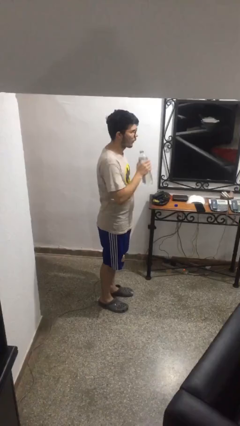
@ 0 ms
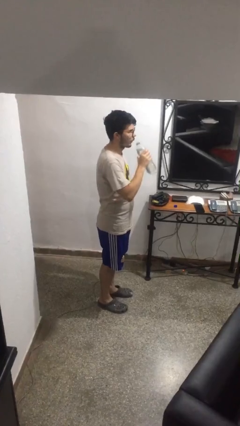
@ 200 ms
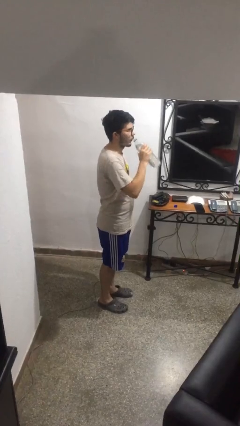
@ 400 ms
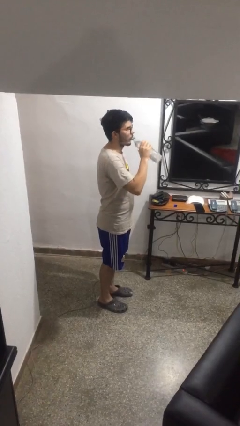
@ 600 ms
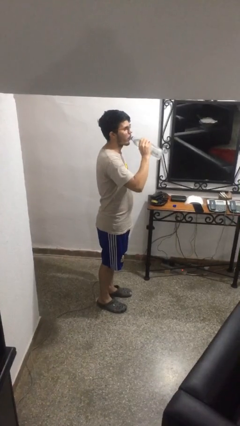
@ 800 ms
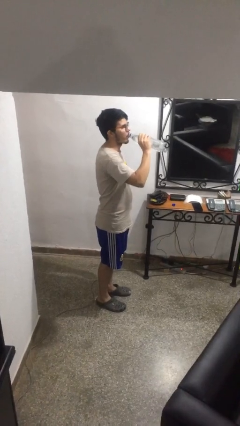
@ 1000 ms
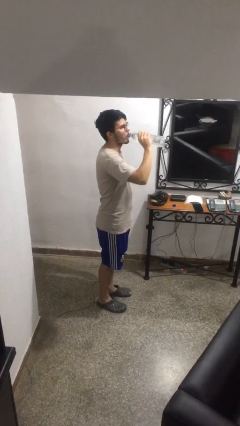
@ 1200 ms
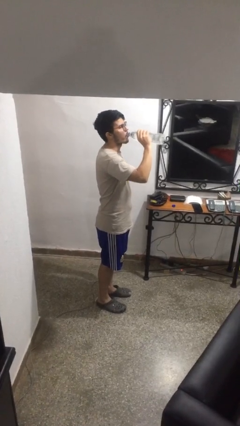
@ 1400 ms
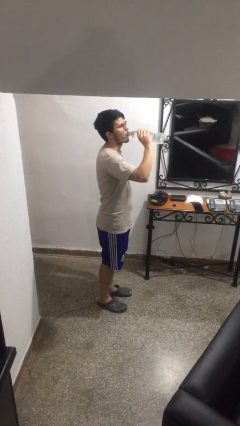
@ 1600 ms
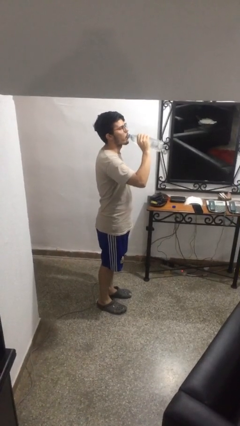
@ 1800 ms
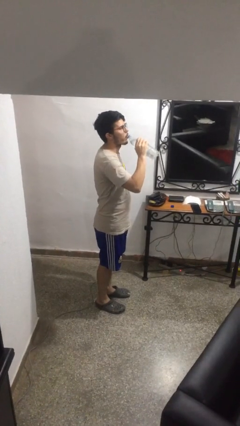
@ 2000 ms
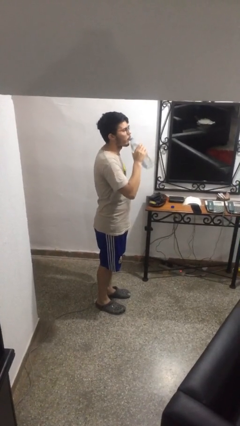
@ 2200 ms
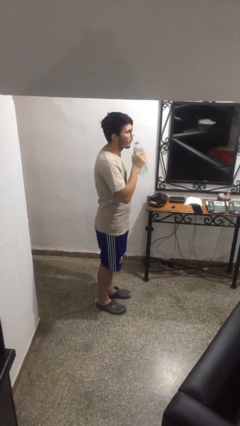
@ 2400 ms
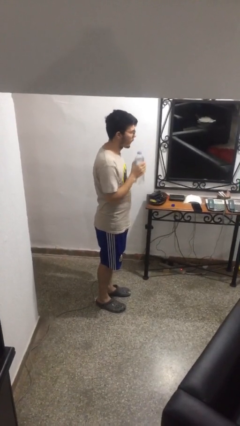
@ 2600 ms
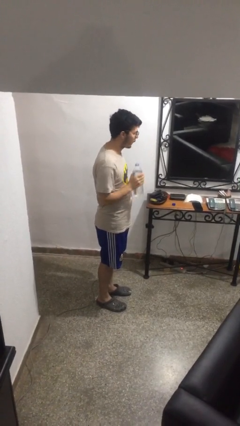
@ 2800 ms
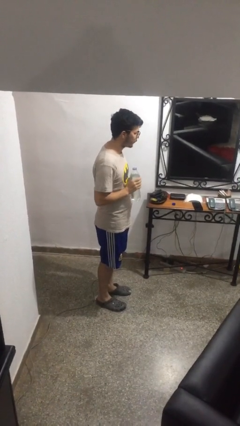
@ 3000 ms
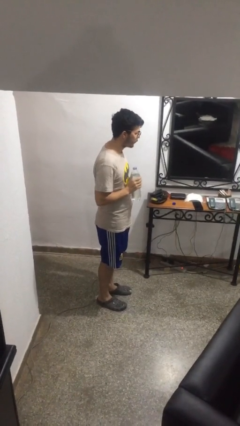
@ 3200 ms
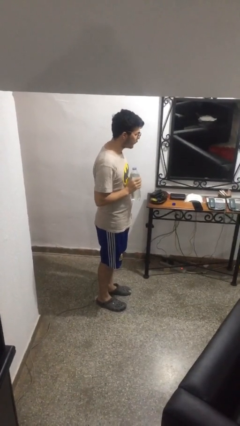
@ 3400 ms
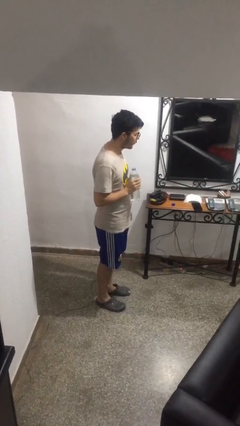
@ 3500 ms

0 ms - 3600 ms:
person drinks from bottle

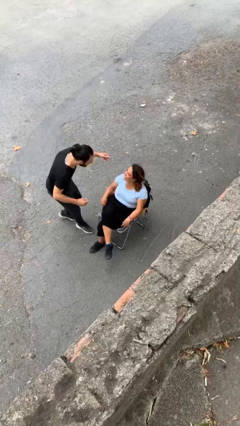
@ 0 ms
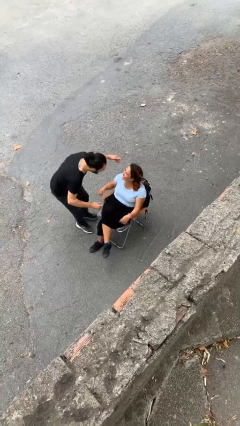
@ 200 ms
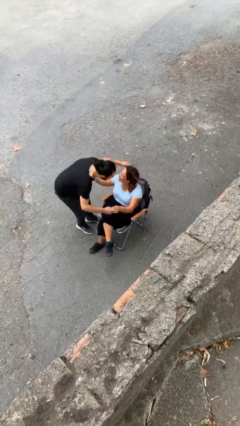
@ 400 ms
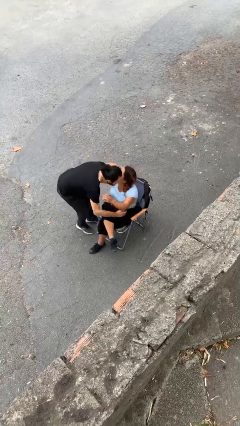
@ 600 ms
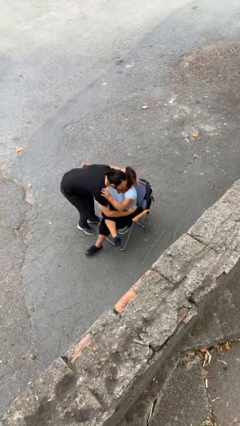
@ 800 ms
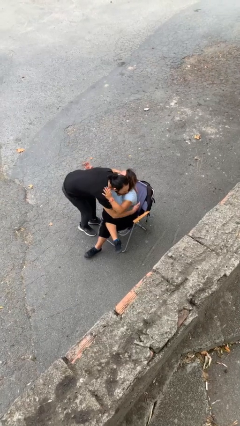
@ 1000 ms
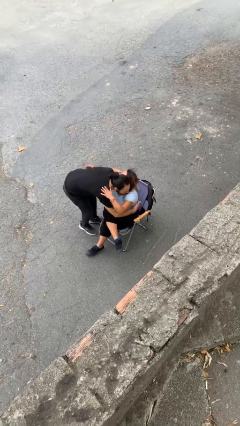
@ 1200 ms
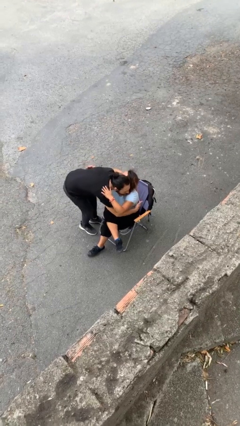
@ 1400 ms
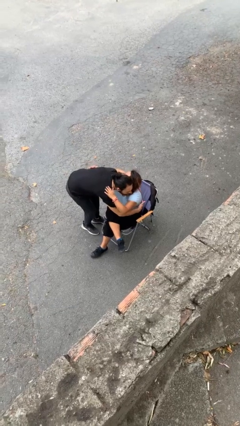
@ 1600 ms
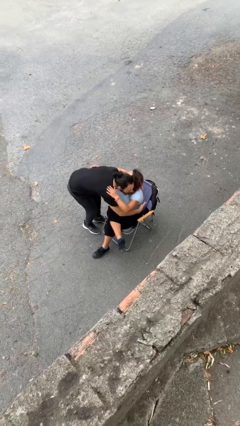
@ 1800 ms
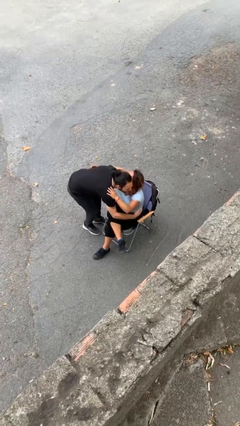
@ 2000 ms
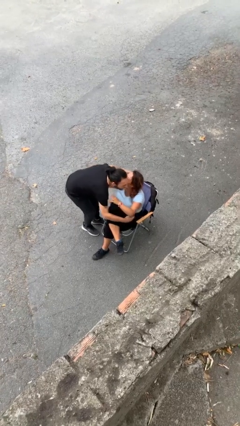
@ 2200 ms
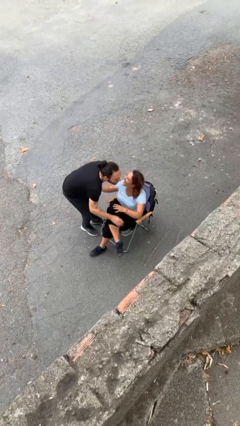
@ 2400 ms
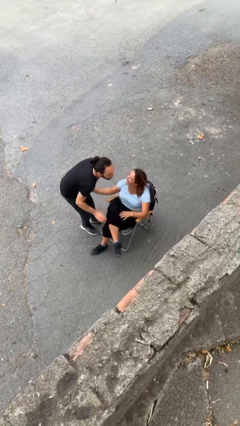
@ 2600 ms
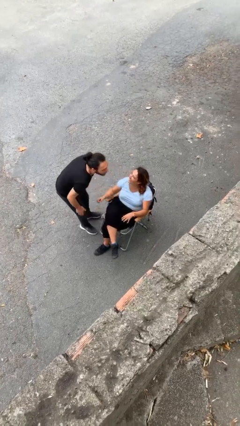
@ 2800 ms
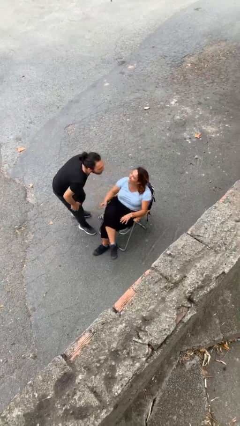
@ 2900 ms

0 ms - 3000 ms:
person embraces person

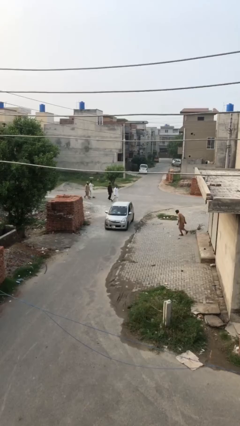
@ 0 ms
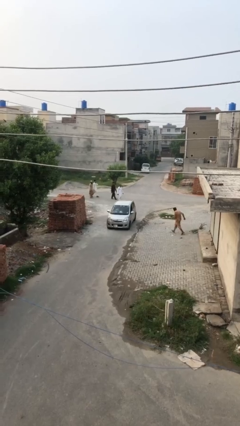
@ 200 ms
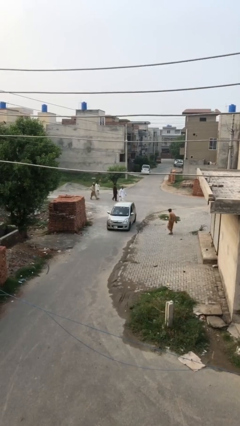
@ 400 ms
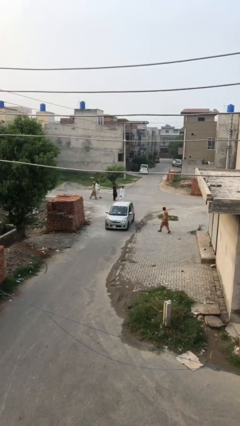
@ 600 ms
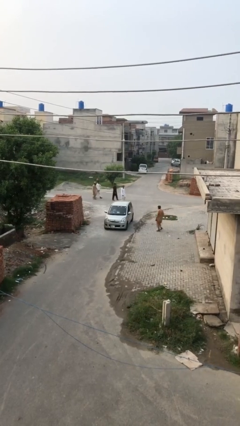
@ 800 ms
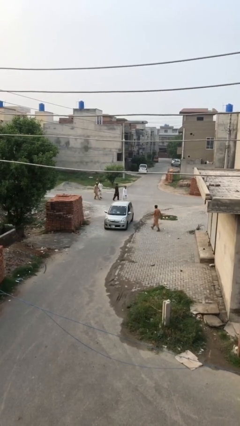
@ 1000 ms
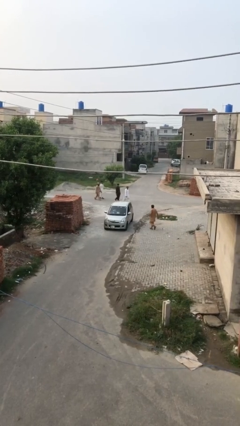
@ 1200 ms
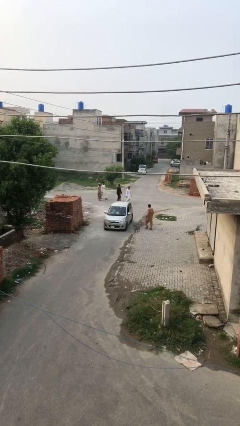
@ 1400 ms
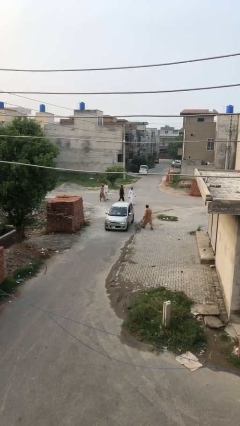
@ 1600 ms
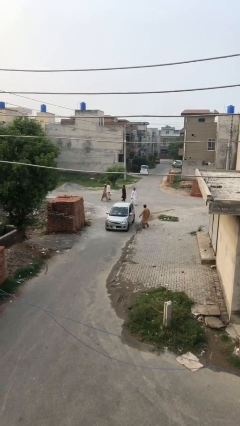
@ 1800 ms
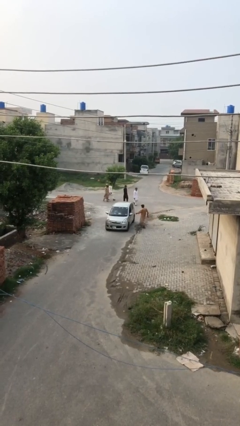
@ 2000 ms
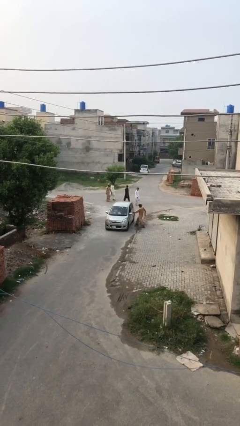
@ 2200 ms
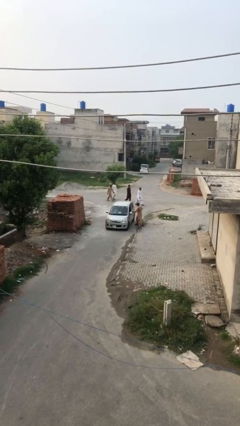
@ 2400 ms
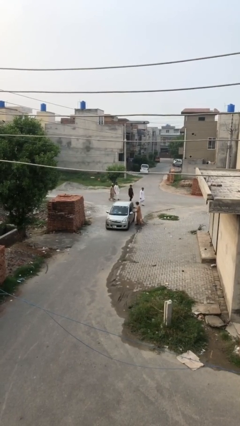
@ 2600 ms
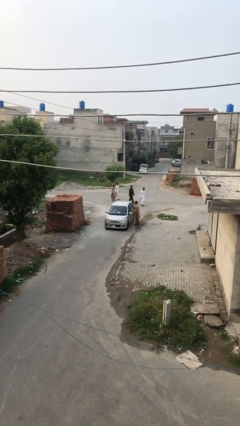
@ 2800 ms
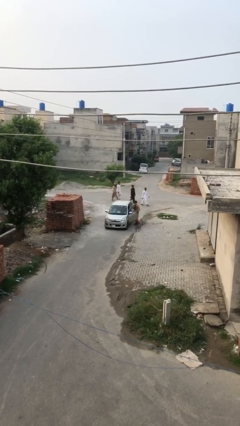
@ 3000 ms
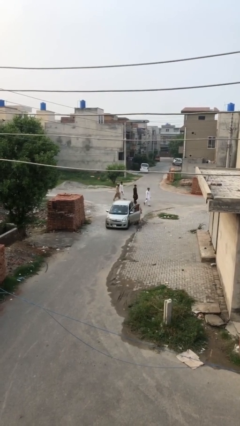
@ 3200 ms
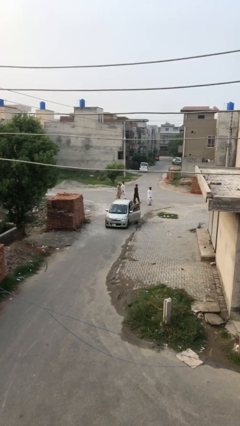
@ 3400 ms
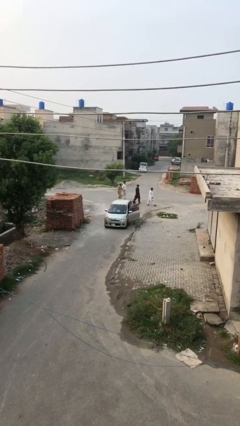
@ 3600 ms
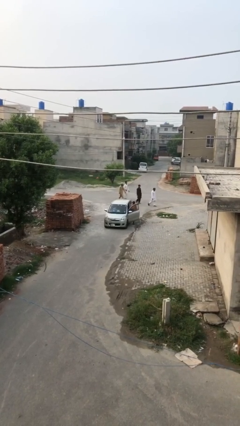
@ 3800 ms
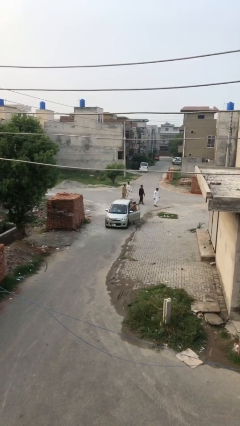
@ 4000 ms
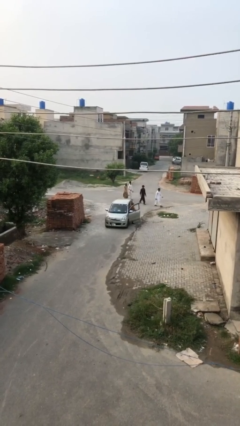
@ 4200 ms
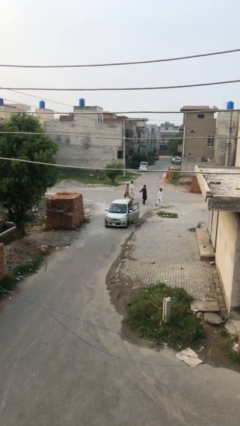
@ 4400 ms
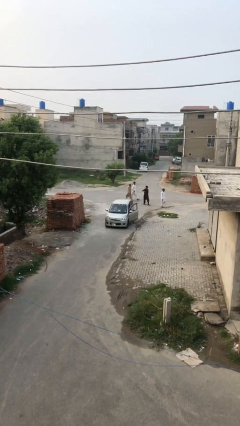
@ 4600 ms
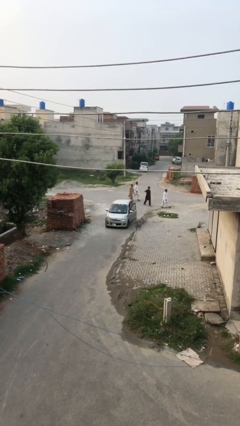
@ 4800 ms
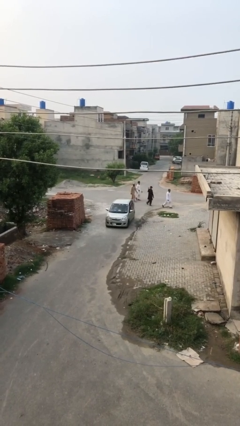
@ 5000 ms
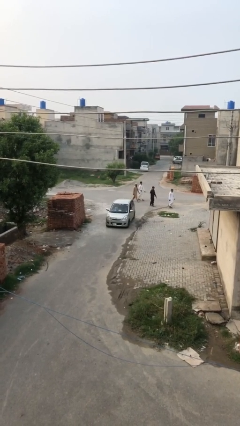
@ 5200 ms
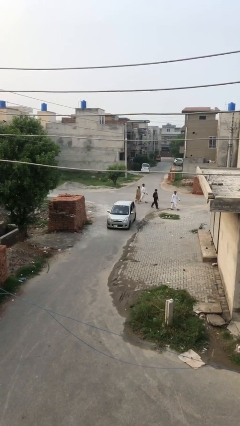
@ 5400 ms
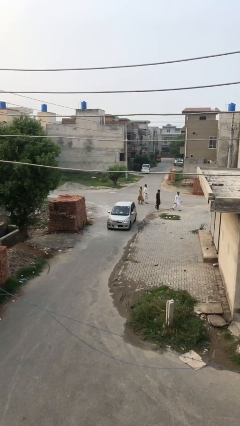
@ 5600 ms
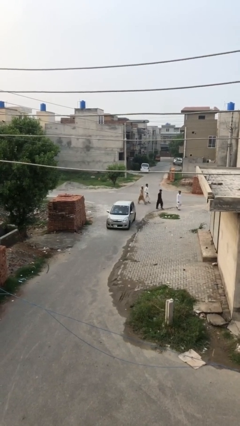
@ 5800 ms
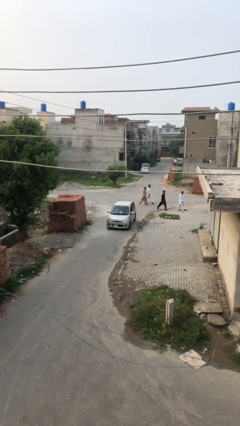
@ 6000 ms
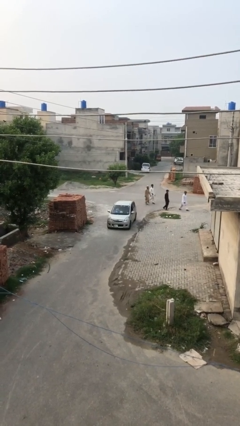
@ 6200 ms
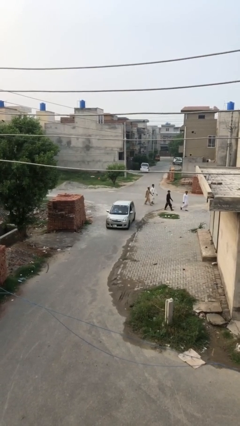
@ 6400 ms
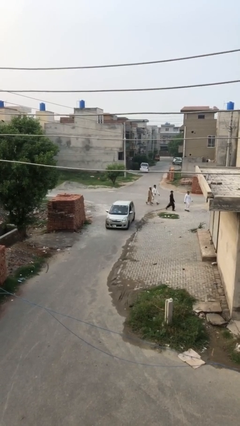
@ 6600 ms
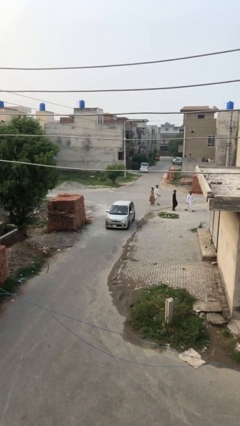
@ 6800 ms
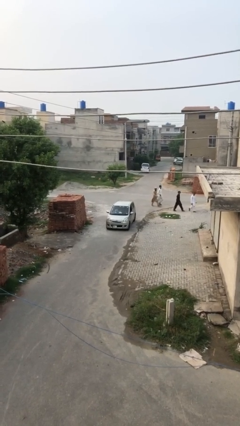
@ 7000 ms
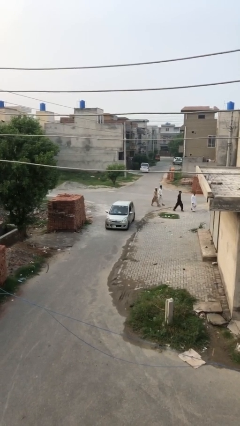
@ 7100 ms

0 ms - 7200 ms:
car picks up person

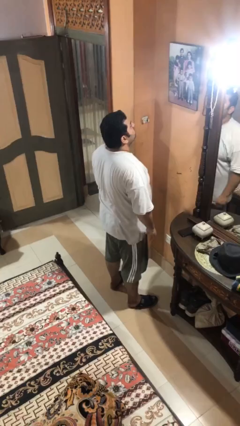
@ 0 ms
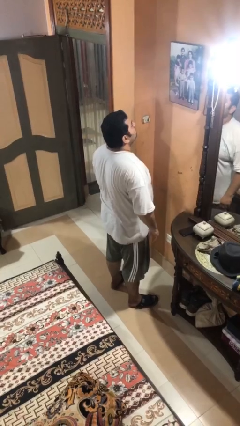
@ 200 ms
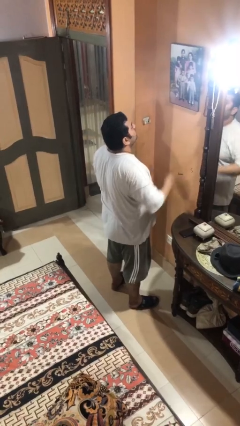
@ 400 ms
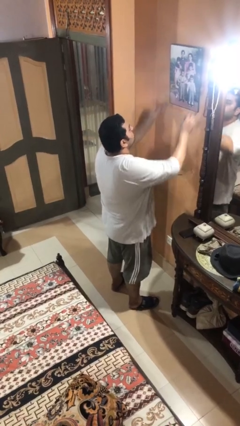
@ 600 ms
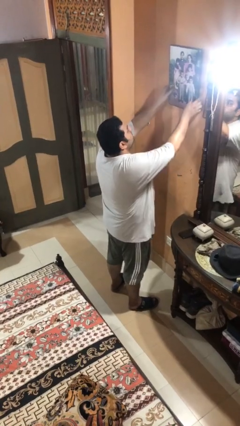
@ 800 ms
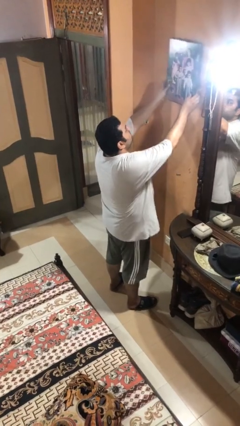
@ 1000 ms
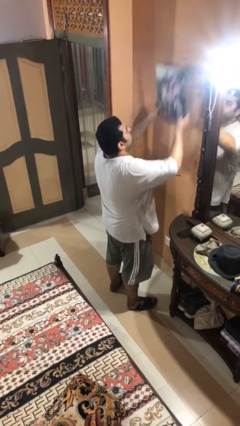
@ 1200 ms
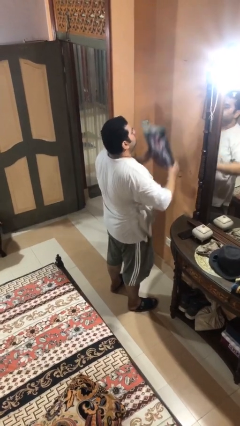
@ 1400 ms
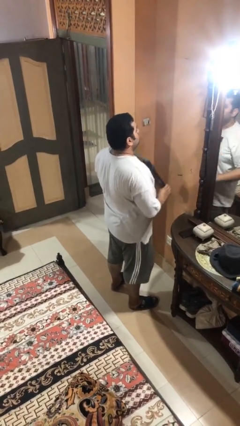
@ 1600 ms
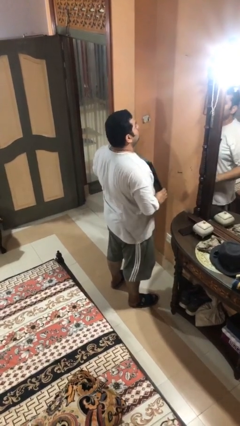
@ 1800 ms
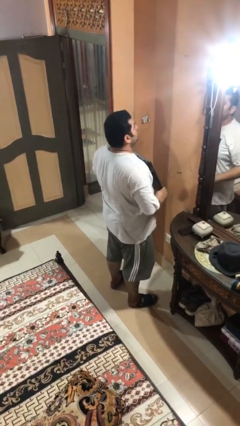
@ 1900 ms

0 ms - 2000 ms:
person takes down picture frame

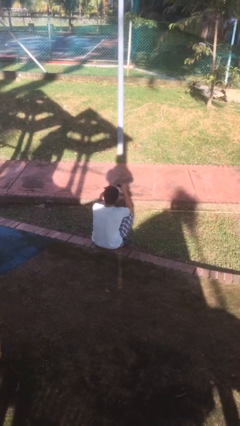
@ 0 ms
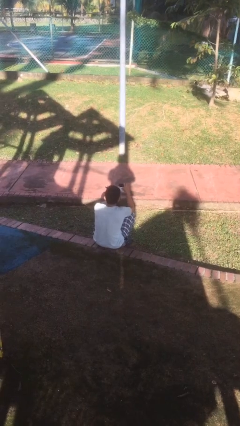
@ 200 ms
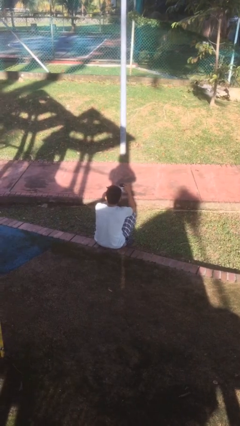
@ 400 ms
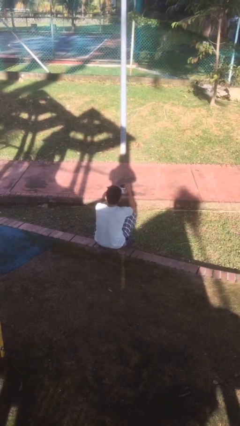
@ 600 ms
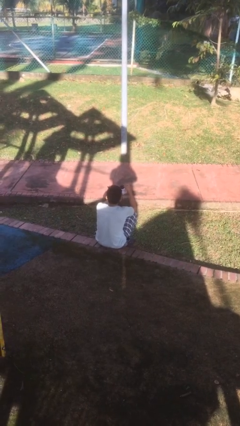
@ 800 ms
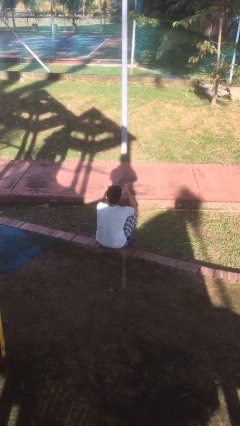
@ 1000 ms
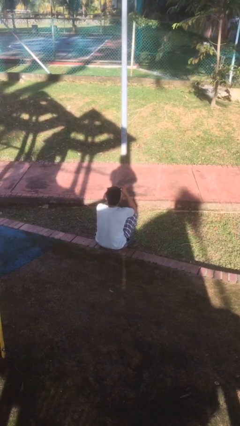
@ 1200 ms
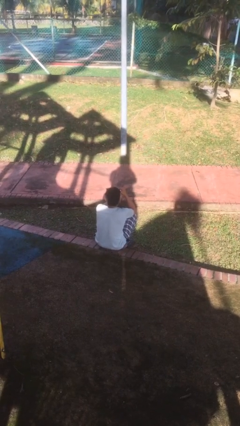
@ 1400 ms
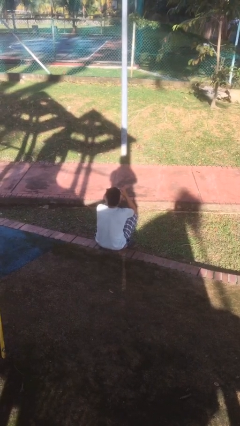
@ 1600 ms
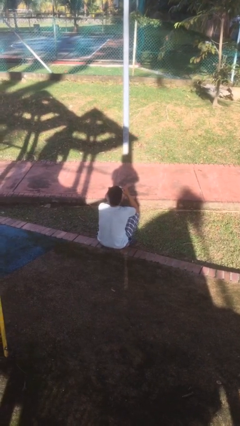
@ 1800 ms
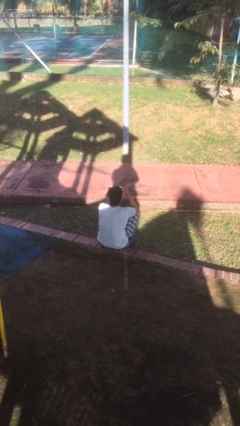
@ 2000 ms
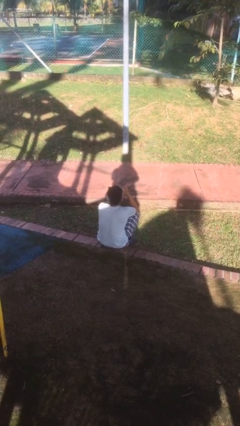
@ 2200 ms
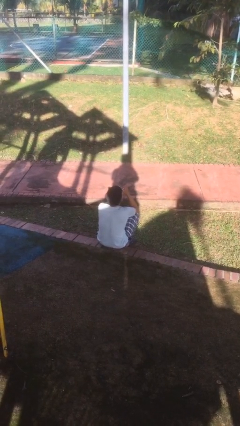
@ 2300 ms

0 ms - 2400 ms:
person drinks from mug
